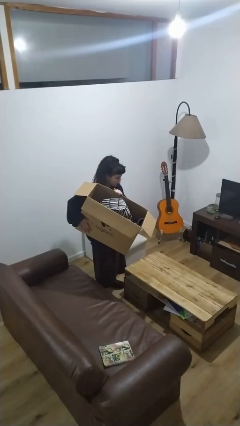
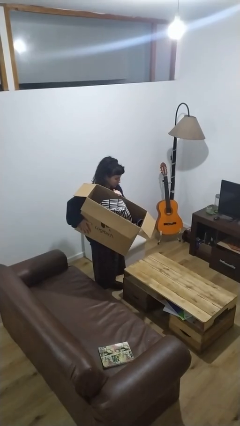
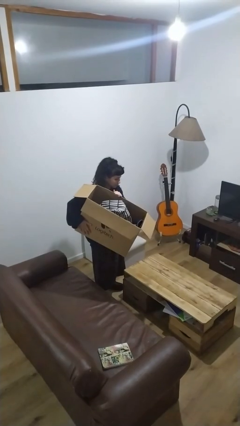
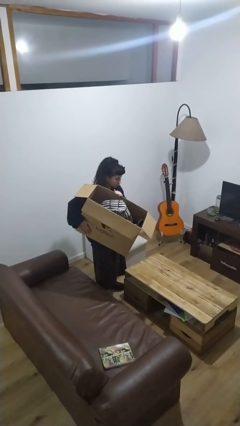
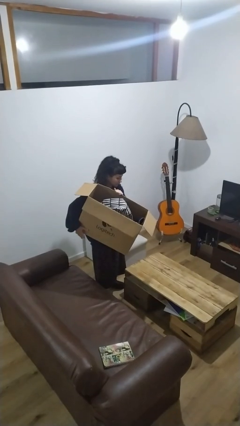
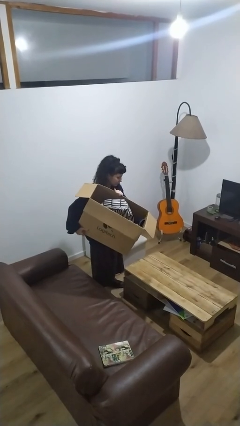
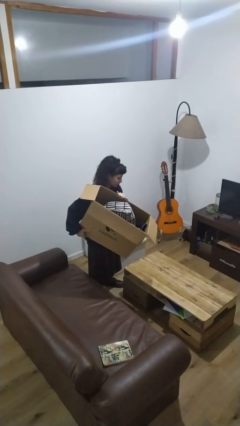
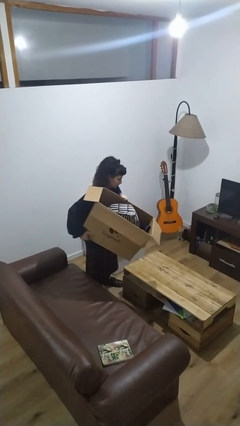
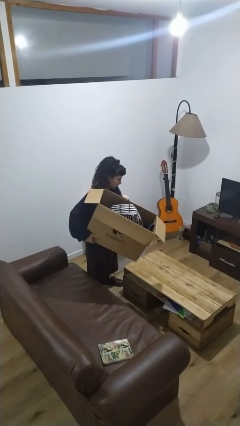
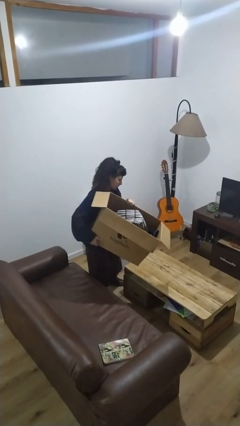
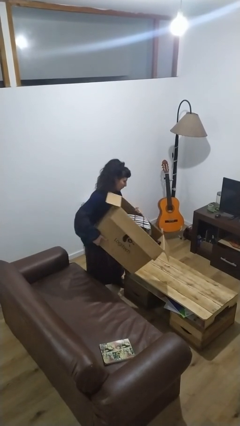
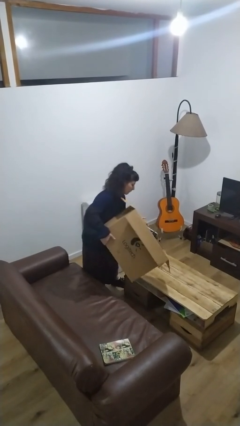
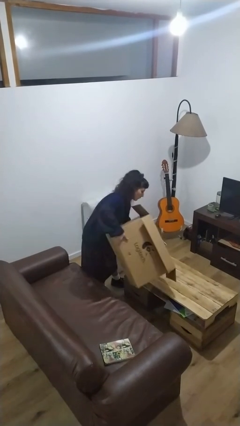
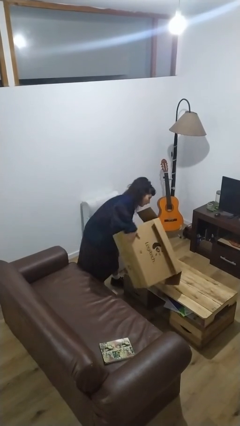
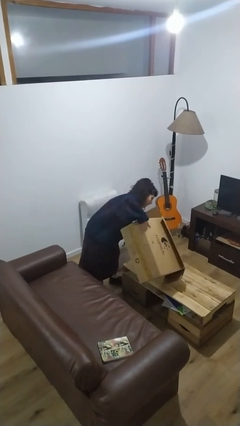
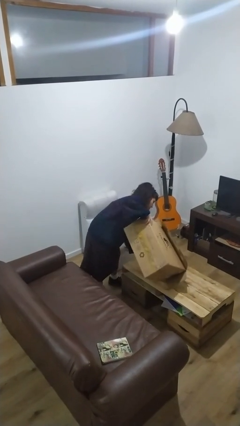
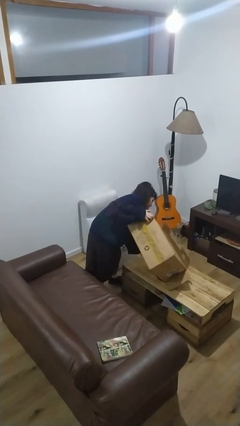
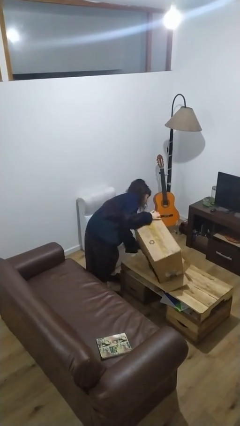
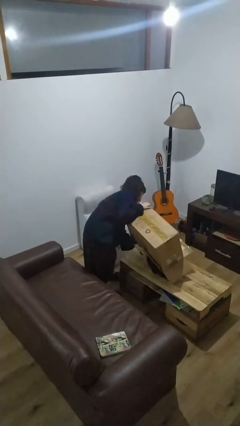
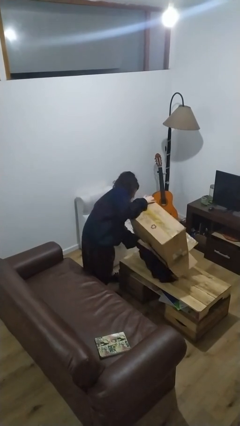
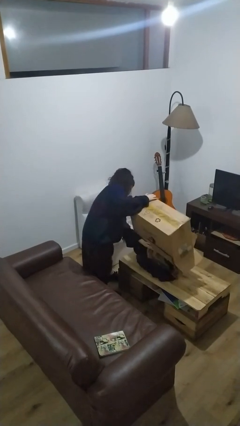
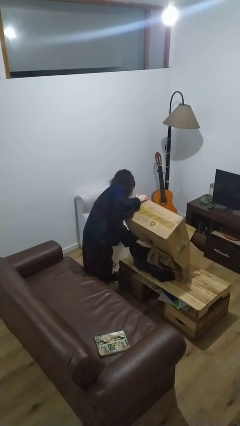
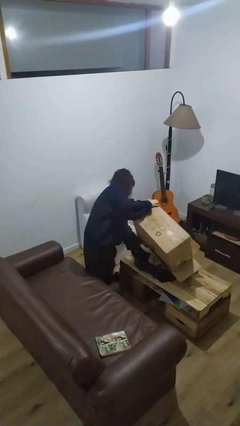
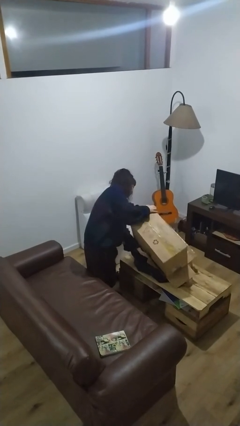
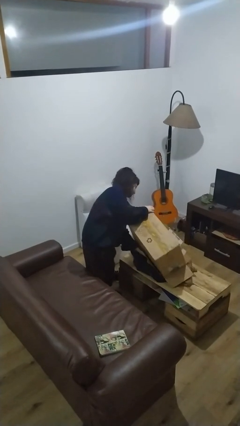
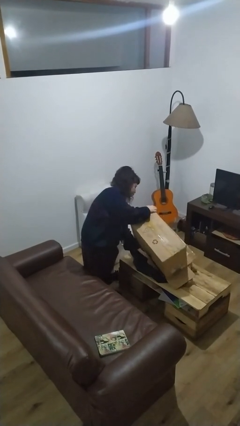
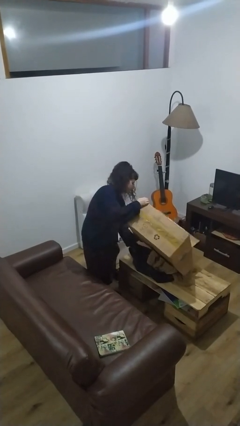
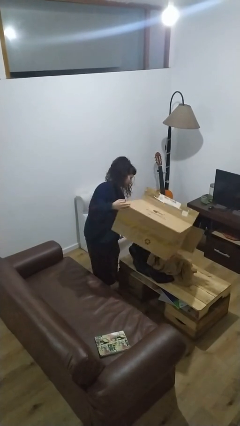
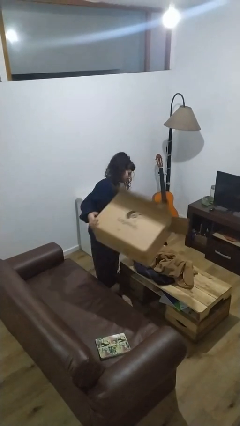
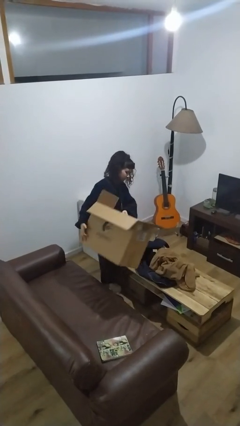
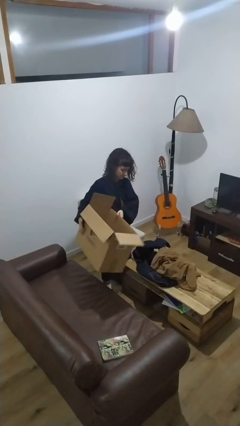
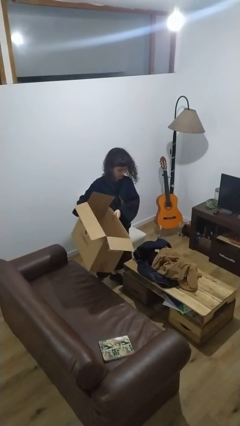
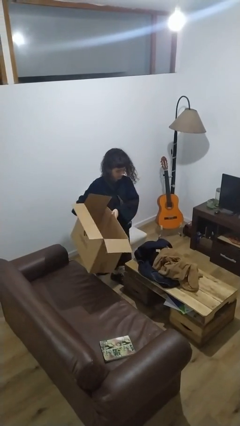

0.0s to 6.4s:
person unloads box onto table

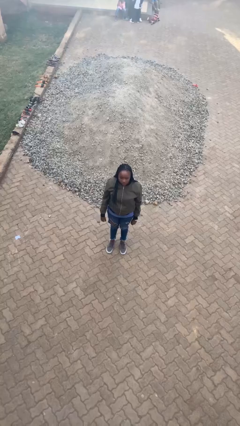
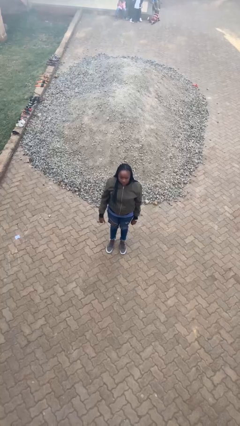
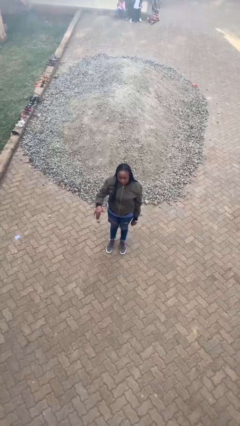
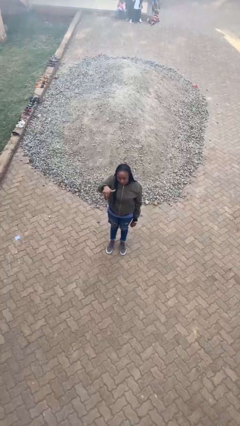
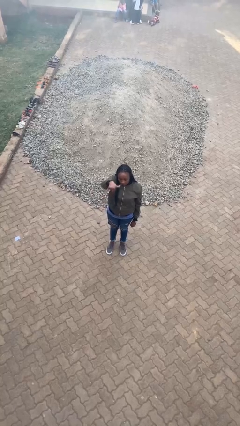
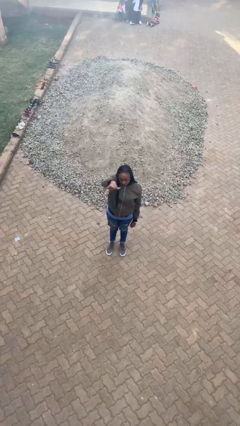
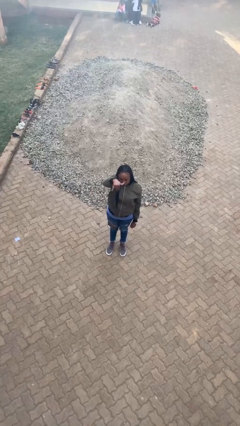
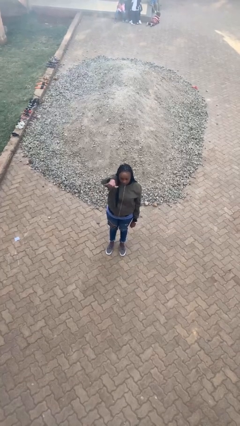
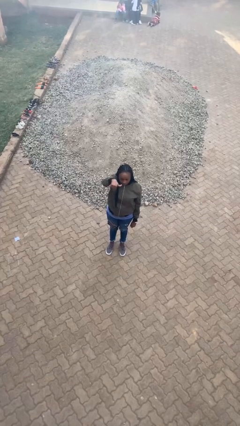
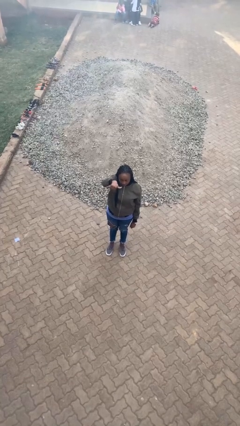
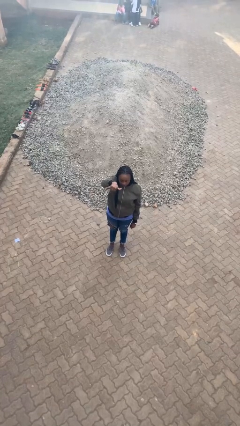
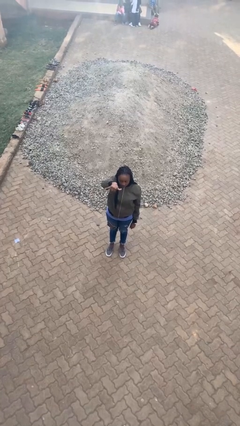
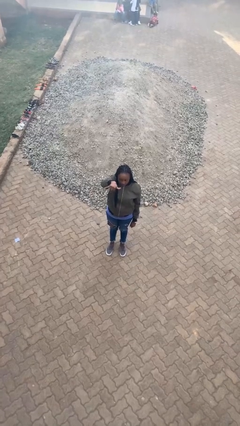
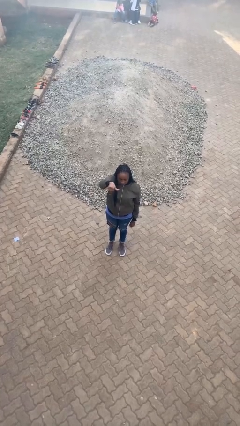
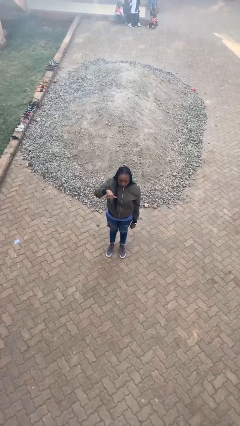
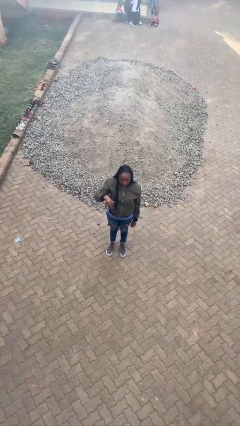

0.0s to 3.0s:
person gestures hang loose

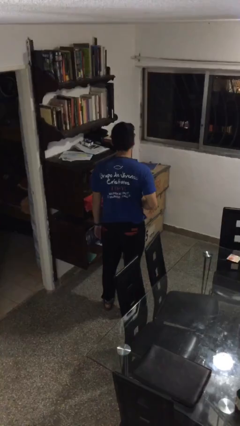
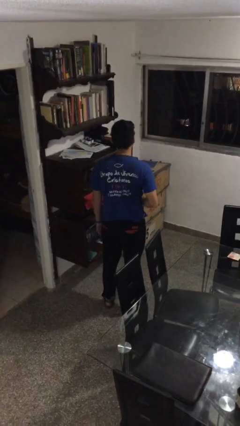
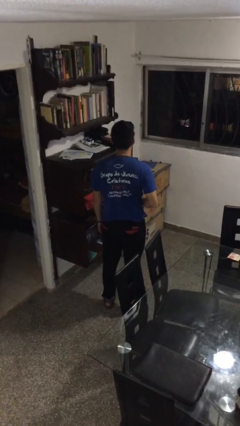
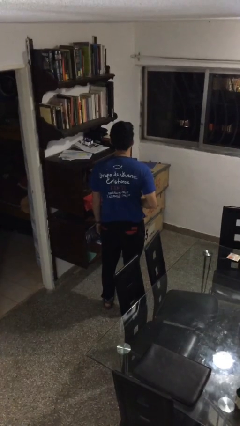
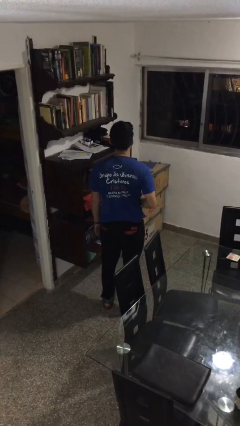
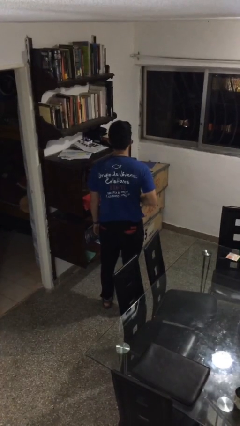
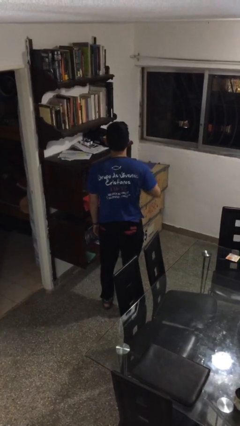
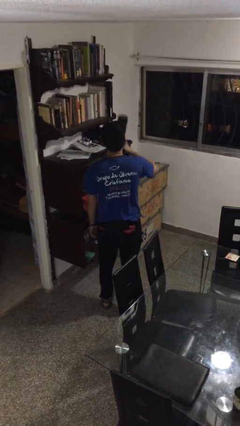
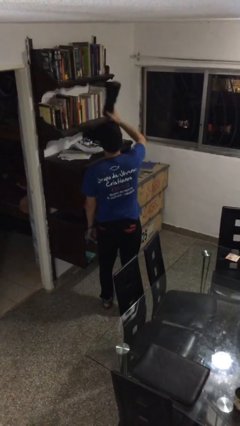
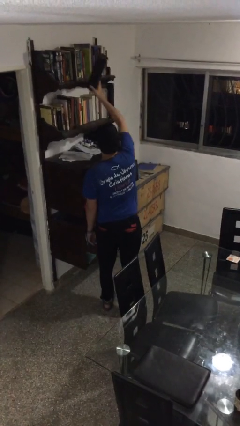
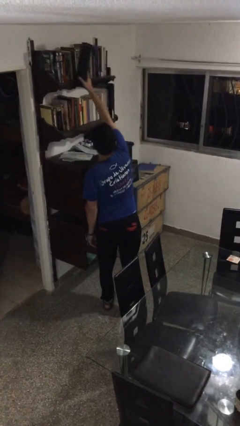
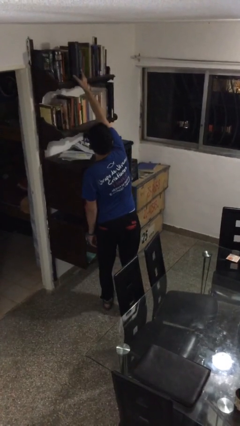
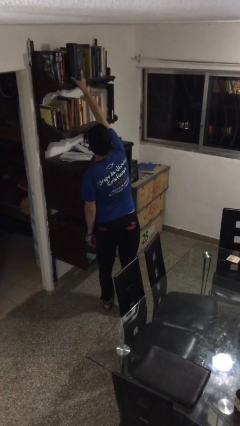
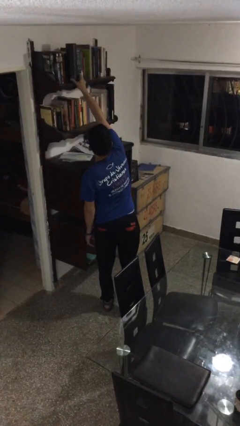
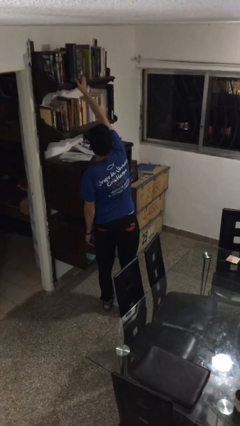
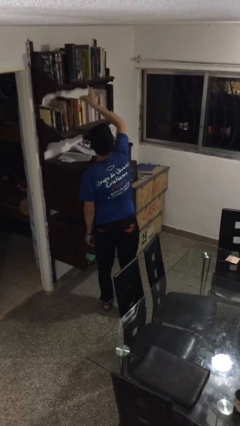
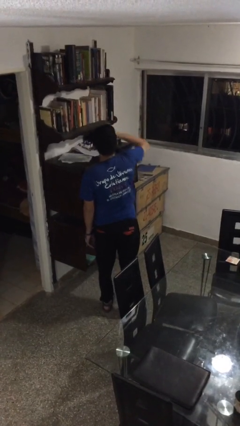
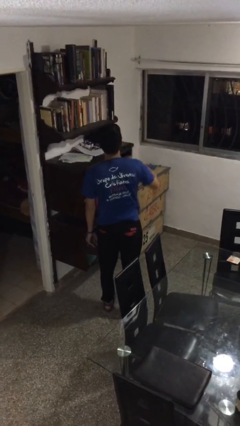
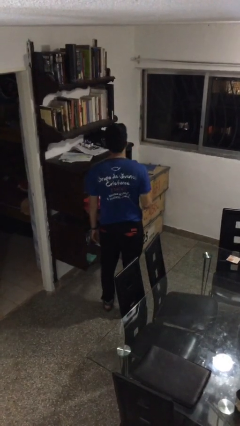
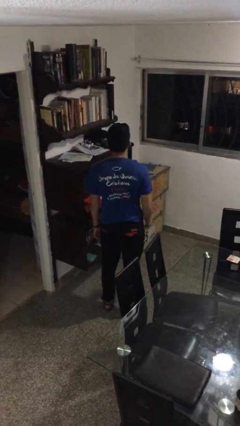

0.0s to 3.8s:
person puts down object on shelf

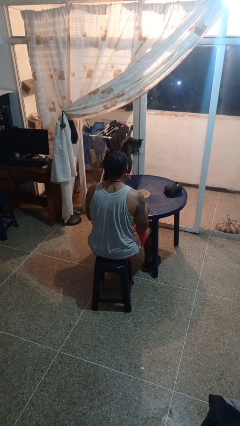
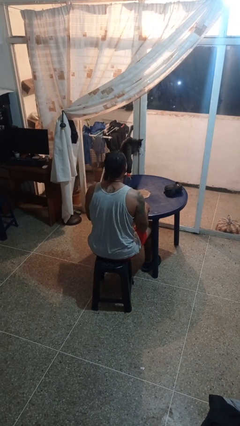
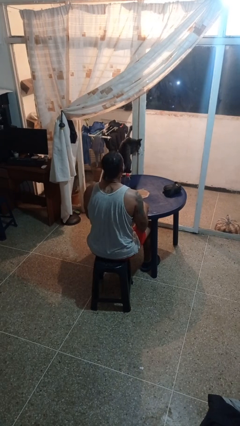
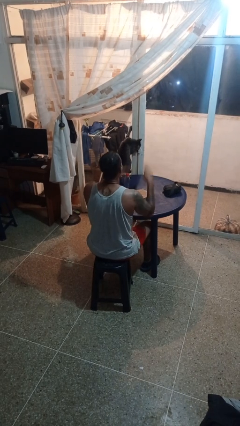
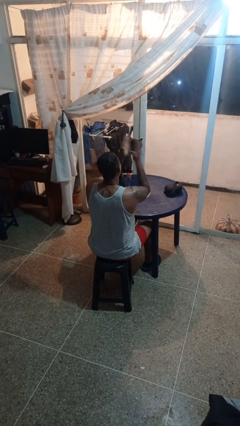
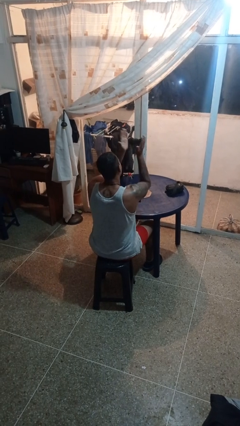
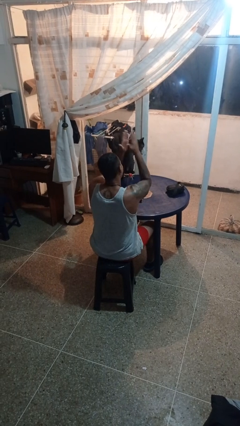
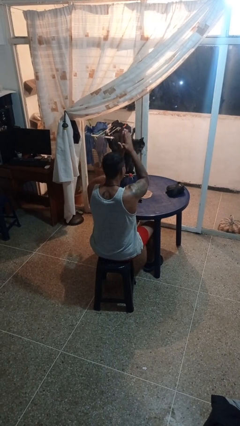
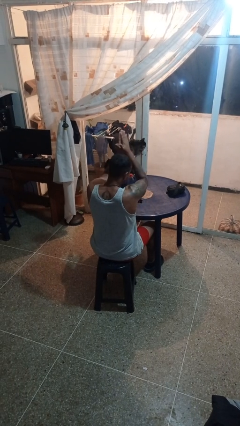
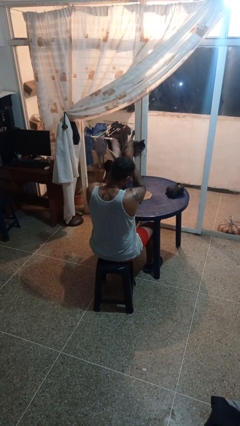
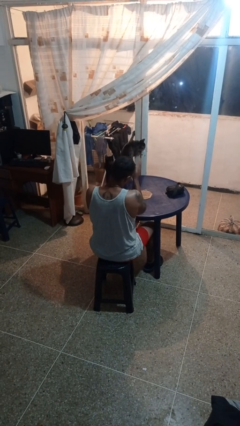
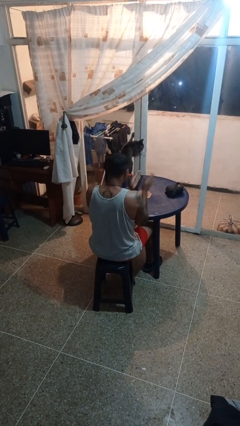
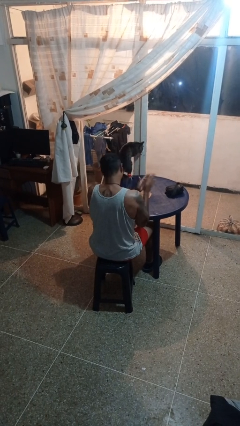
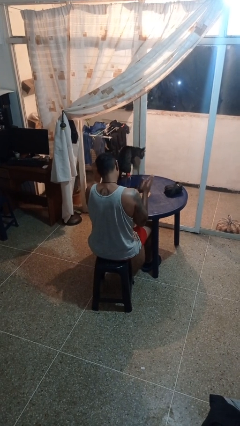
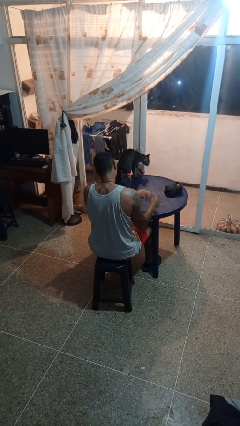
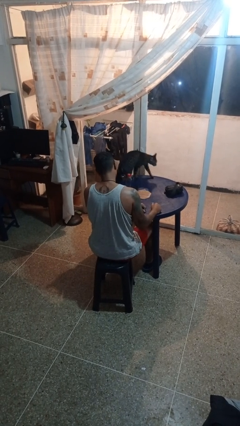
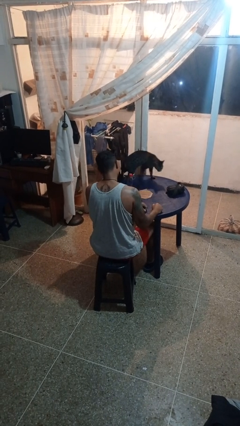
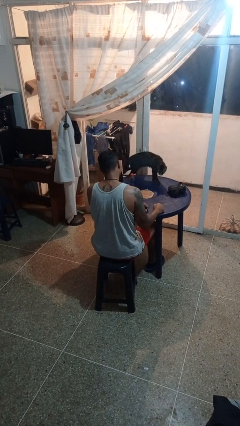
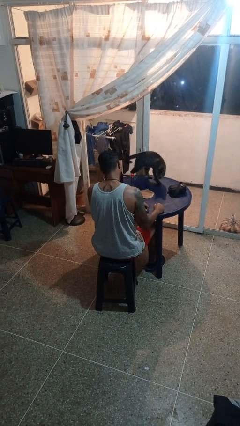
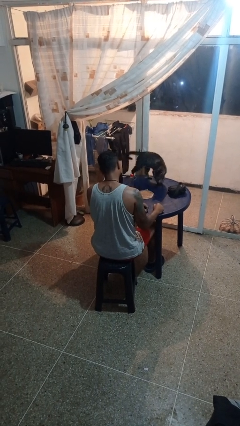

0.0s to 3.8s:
person claps hands

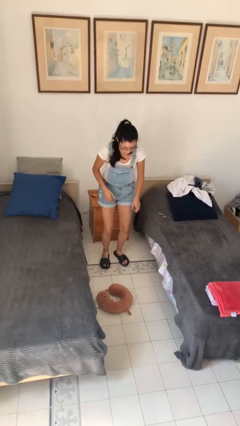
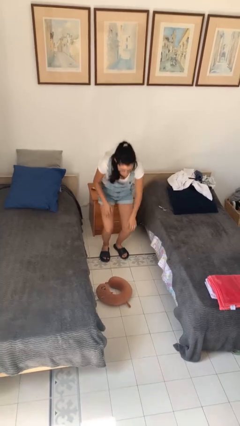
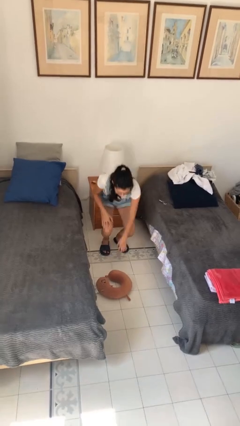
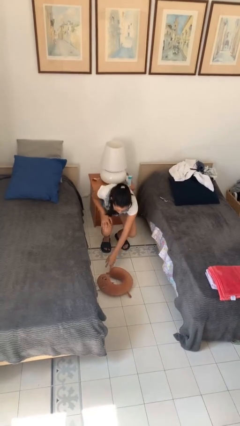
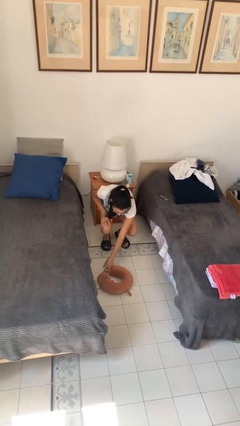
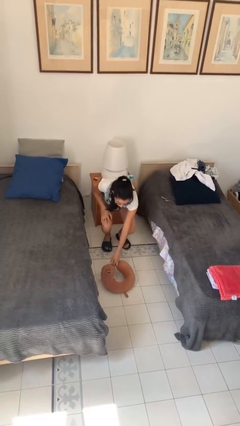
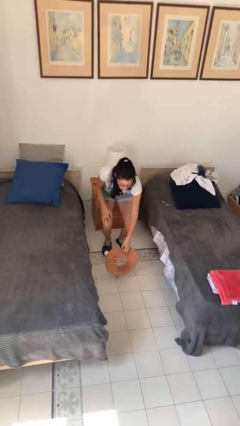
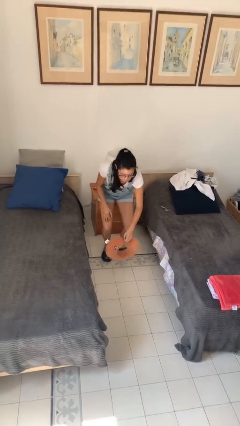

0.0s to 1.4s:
person picks up object from floor
